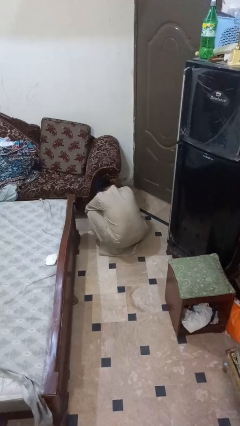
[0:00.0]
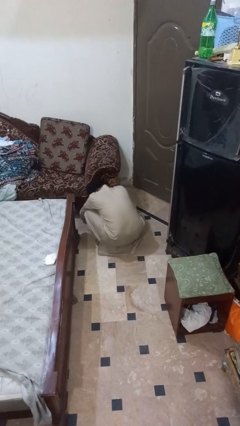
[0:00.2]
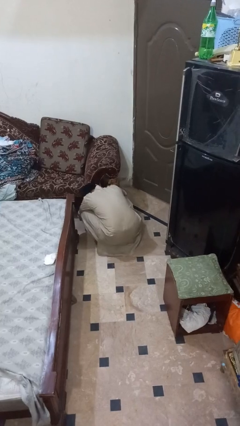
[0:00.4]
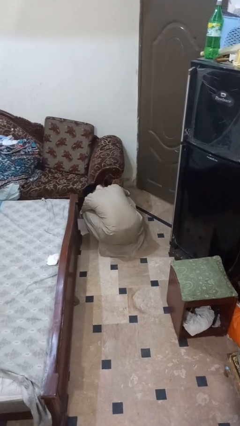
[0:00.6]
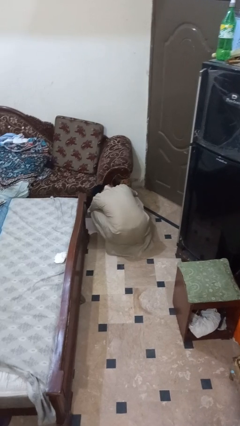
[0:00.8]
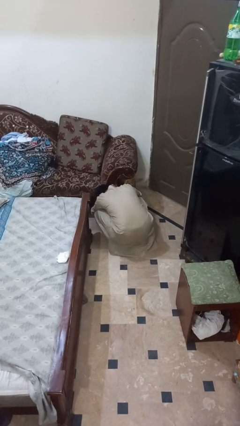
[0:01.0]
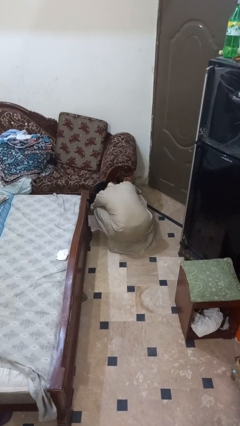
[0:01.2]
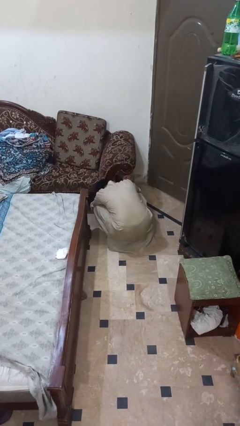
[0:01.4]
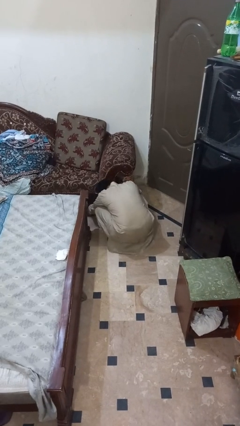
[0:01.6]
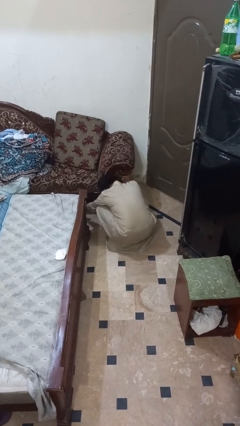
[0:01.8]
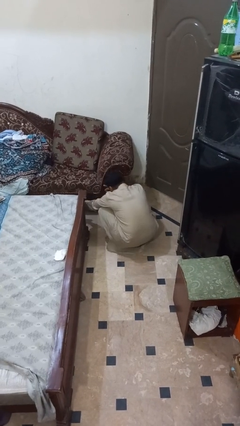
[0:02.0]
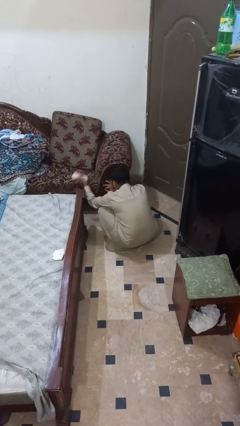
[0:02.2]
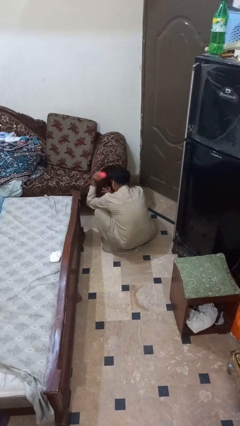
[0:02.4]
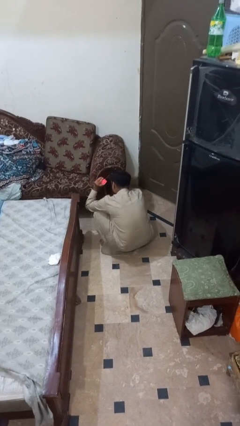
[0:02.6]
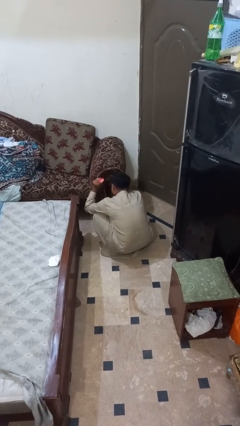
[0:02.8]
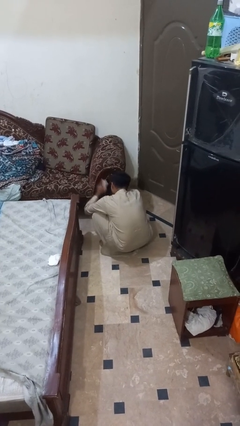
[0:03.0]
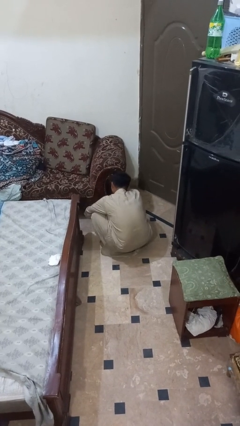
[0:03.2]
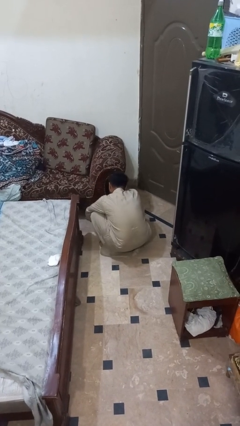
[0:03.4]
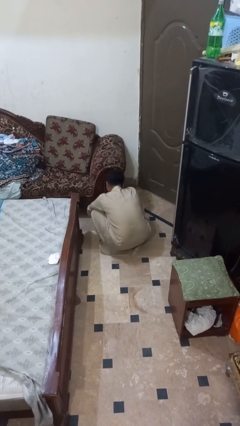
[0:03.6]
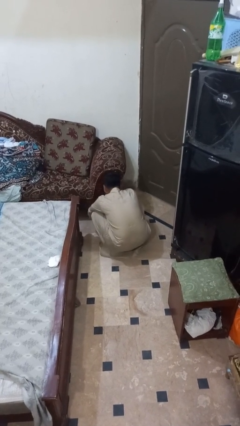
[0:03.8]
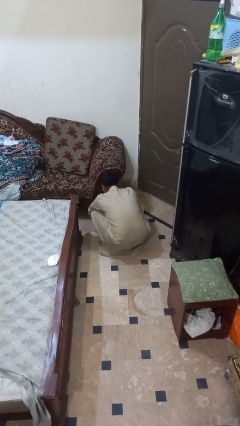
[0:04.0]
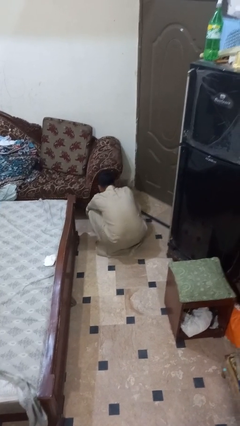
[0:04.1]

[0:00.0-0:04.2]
person searches under couch

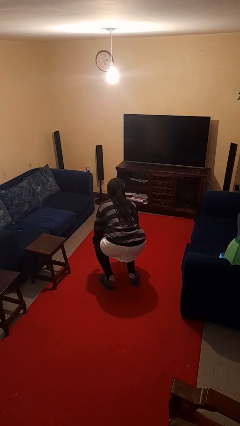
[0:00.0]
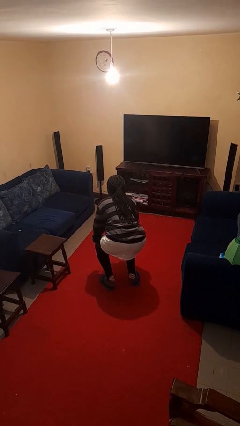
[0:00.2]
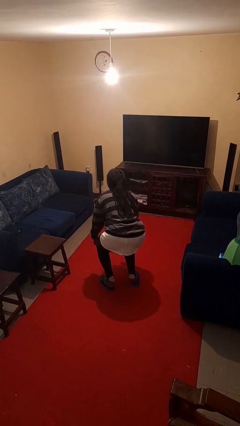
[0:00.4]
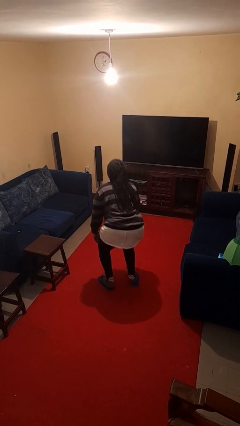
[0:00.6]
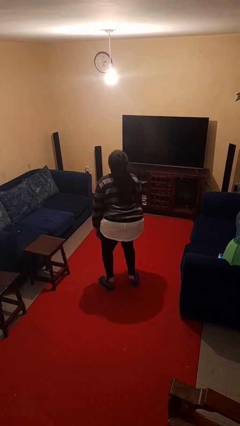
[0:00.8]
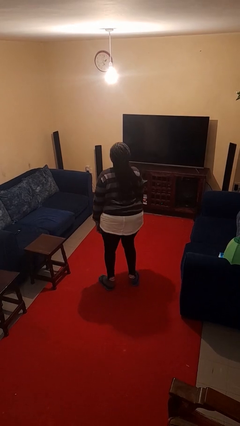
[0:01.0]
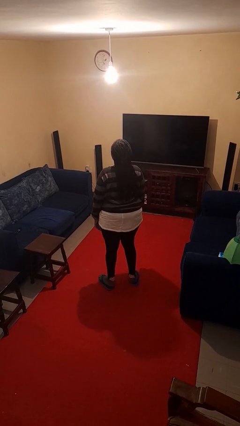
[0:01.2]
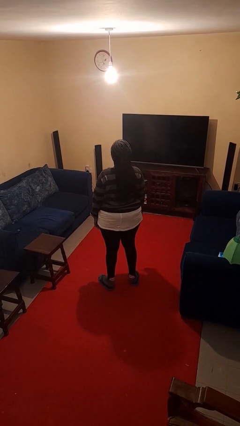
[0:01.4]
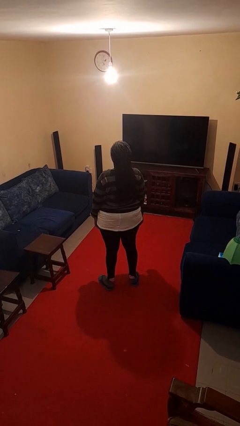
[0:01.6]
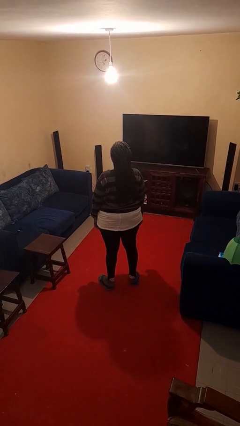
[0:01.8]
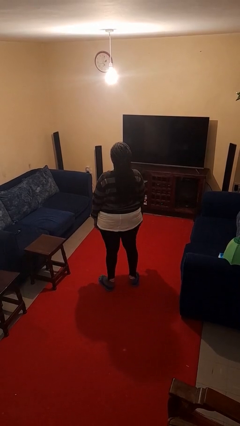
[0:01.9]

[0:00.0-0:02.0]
person stands up

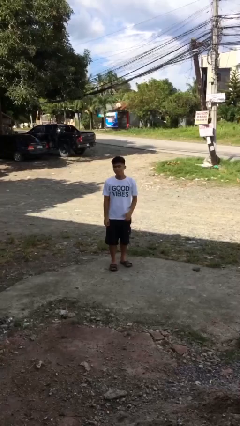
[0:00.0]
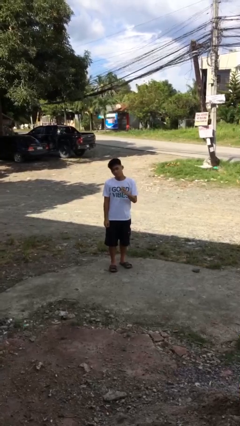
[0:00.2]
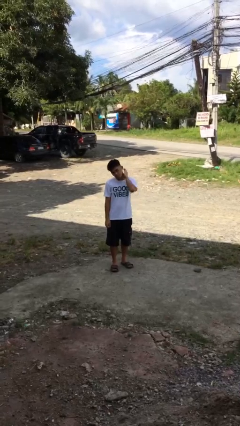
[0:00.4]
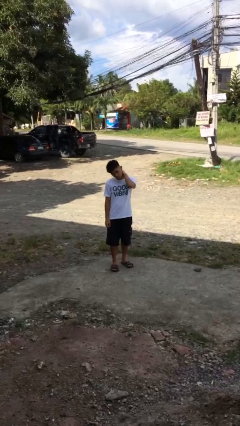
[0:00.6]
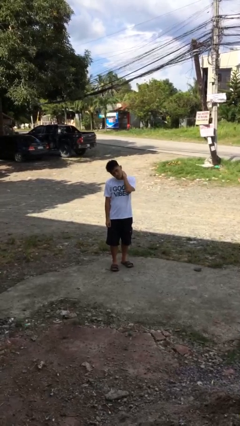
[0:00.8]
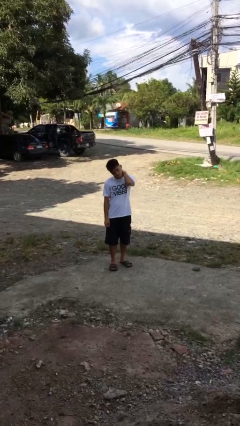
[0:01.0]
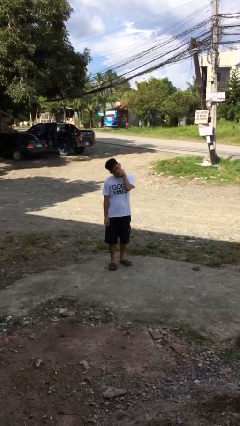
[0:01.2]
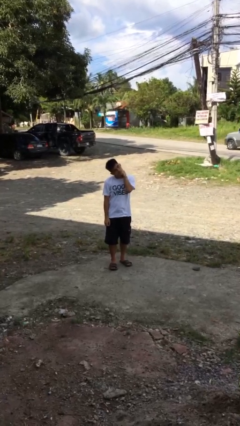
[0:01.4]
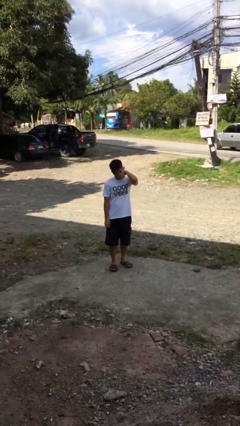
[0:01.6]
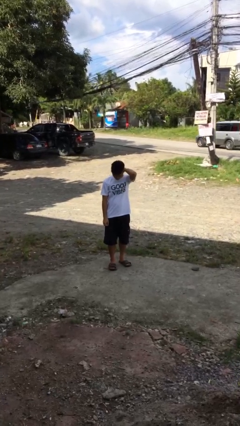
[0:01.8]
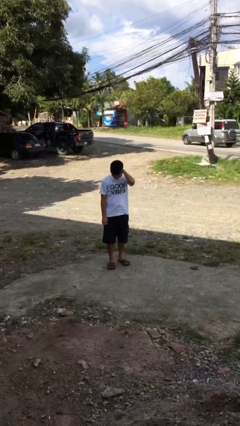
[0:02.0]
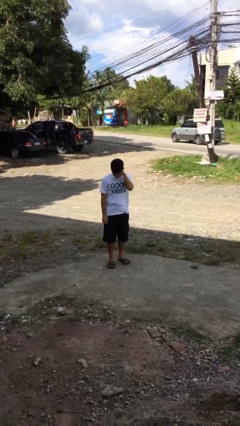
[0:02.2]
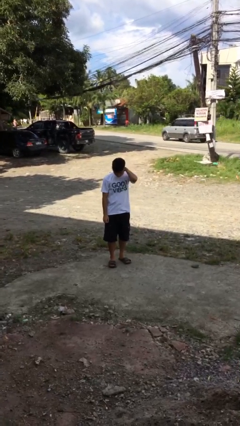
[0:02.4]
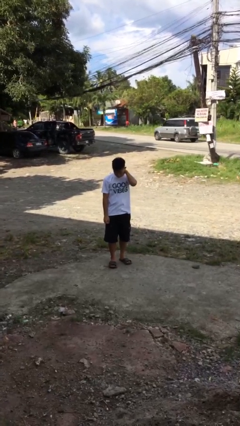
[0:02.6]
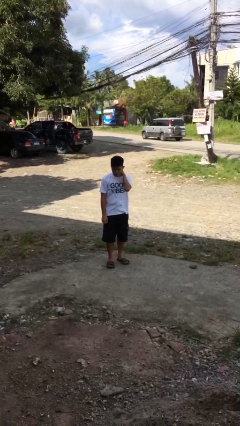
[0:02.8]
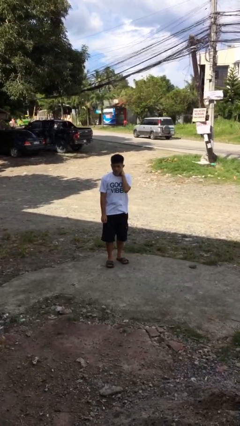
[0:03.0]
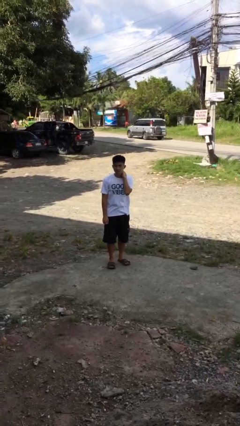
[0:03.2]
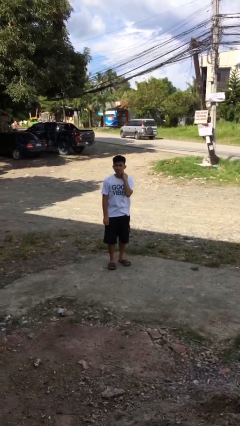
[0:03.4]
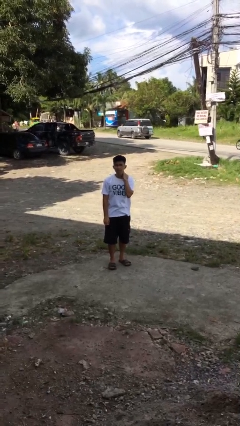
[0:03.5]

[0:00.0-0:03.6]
person rubs neck

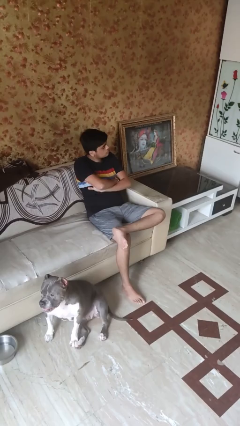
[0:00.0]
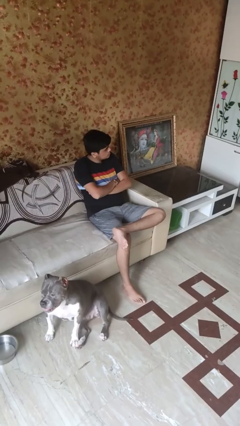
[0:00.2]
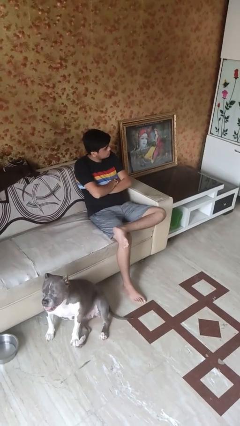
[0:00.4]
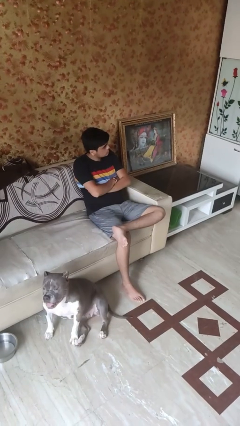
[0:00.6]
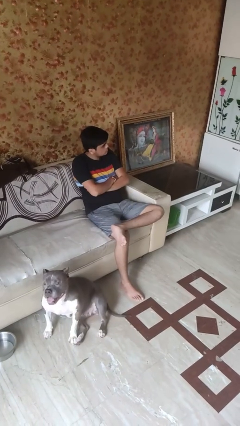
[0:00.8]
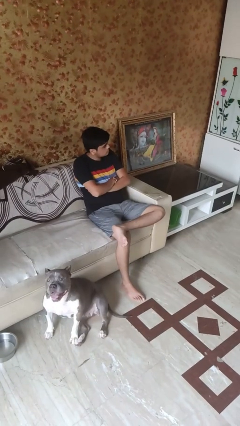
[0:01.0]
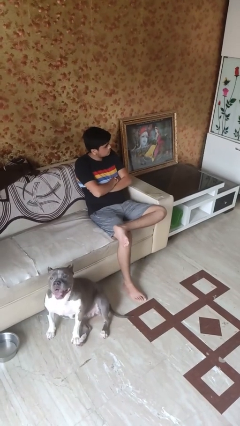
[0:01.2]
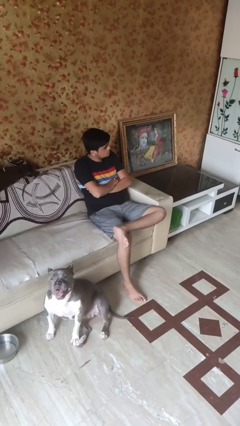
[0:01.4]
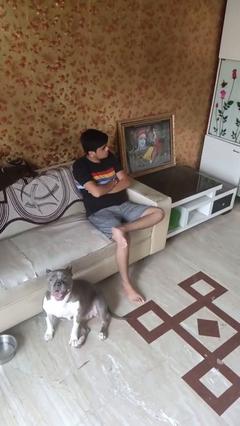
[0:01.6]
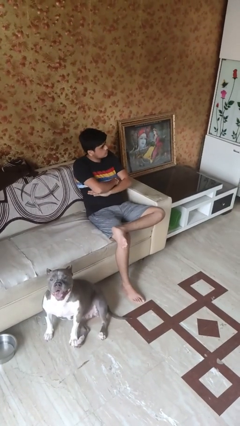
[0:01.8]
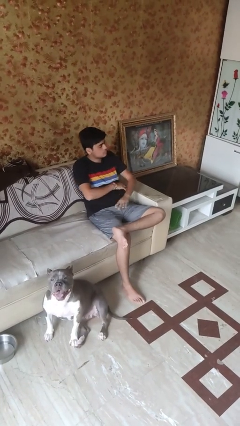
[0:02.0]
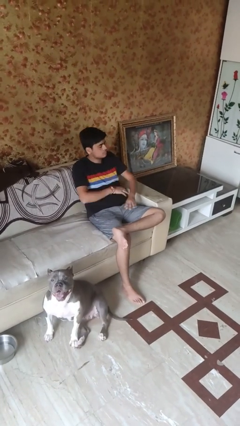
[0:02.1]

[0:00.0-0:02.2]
person crosses arms

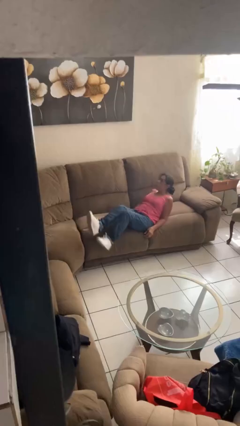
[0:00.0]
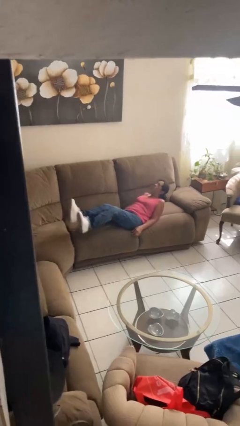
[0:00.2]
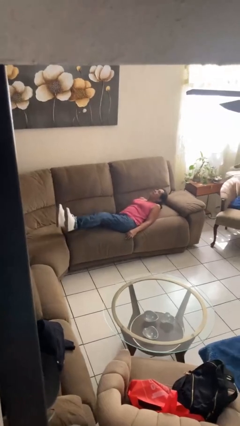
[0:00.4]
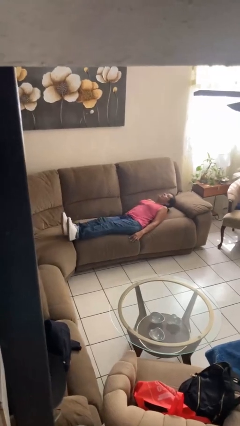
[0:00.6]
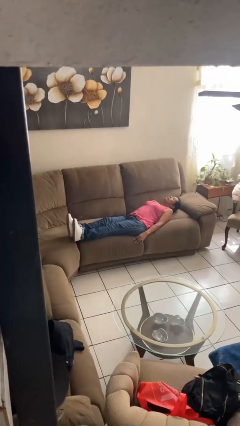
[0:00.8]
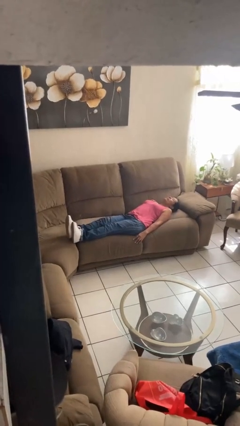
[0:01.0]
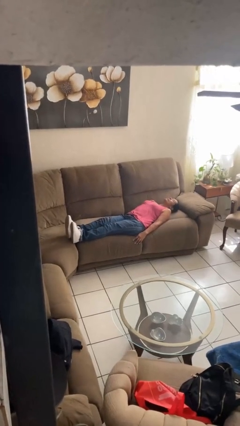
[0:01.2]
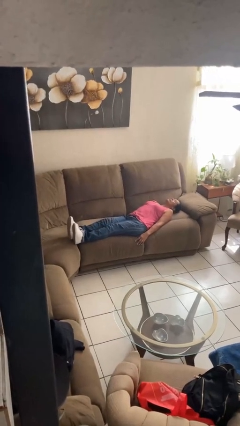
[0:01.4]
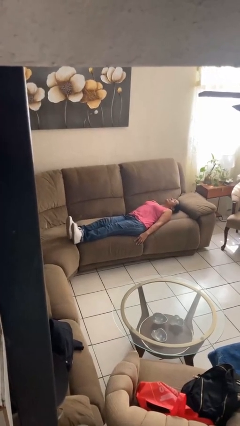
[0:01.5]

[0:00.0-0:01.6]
person lies down on couch

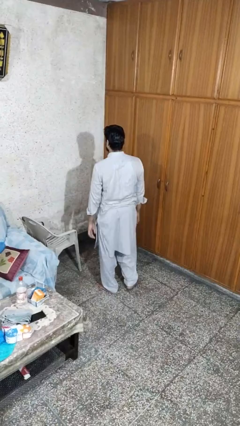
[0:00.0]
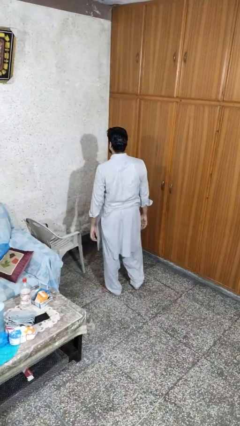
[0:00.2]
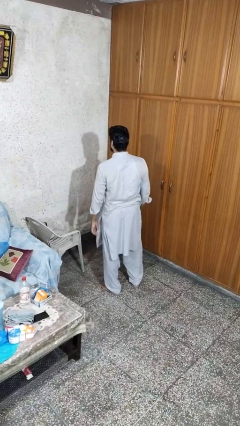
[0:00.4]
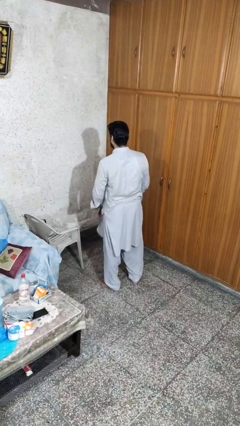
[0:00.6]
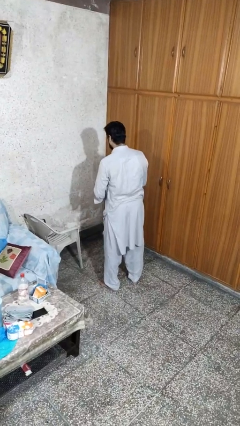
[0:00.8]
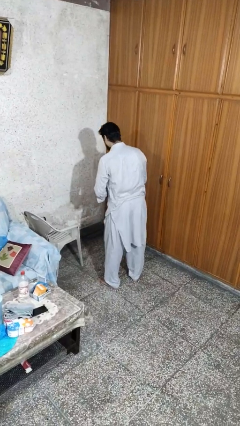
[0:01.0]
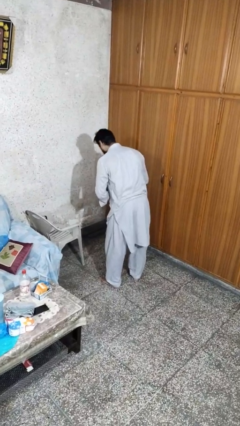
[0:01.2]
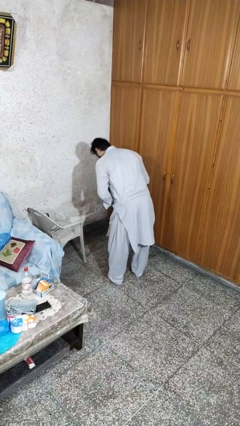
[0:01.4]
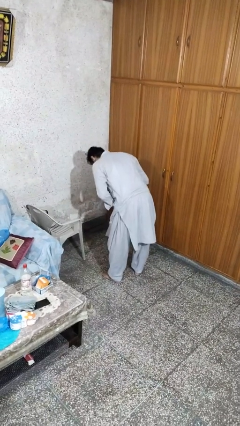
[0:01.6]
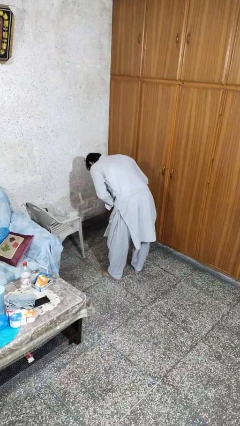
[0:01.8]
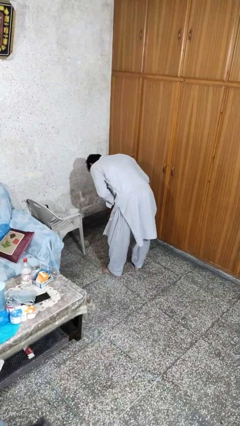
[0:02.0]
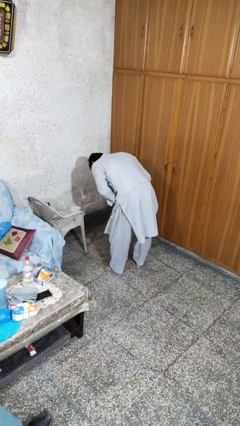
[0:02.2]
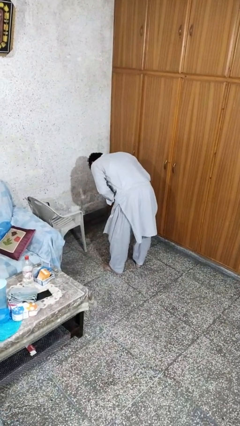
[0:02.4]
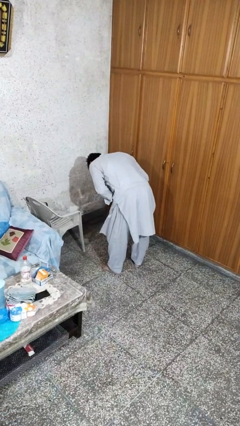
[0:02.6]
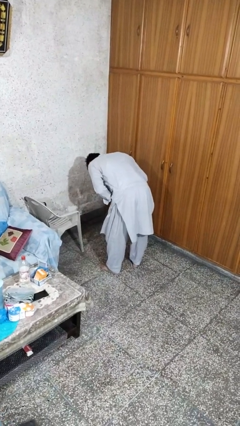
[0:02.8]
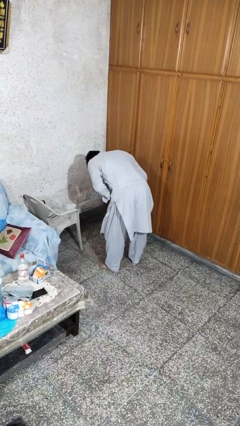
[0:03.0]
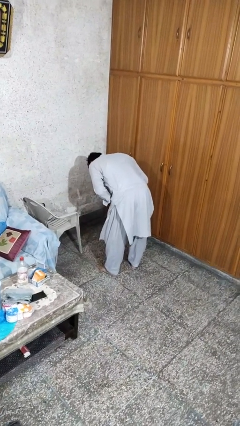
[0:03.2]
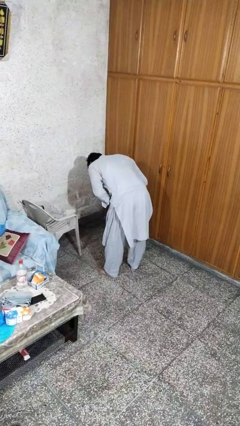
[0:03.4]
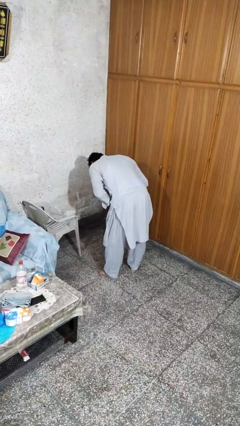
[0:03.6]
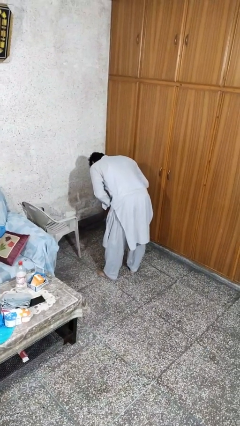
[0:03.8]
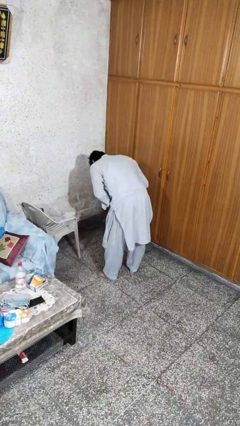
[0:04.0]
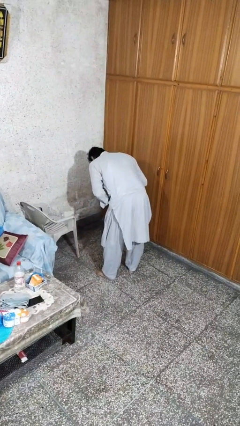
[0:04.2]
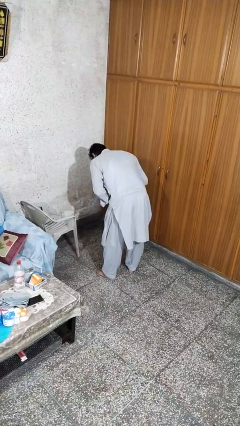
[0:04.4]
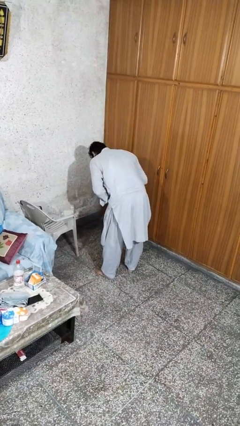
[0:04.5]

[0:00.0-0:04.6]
person bows
